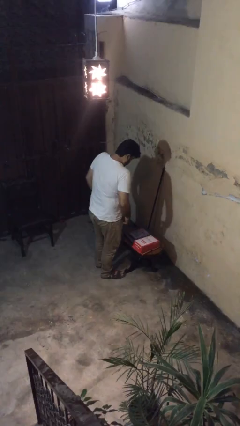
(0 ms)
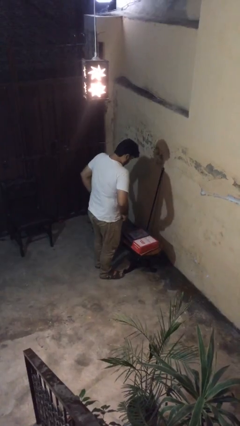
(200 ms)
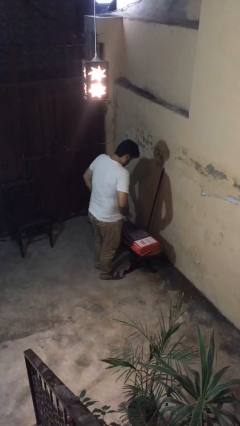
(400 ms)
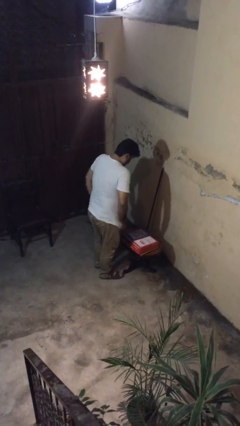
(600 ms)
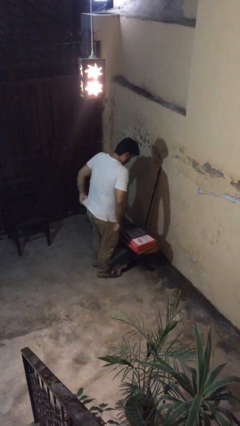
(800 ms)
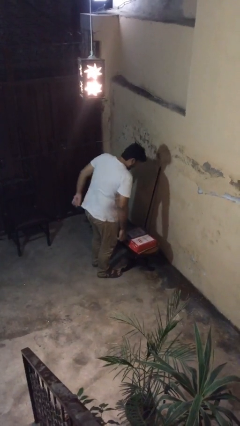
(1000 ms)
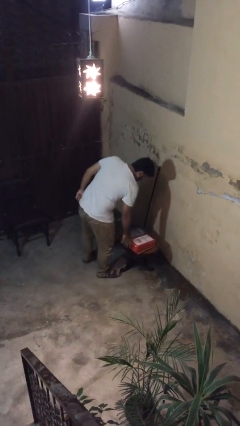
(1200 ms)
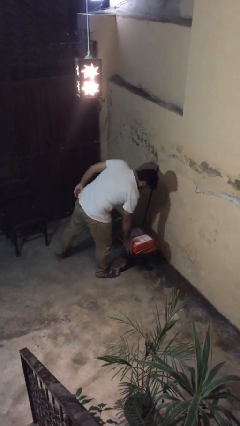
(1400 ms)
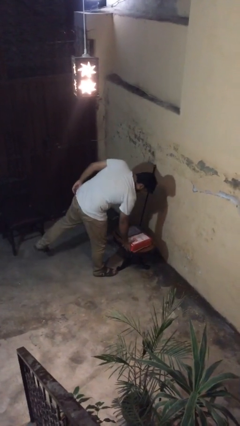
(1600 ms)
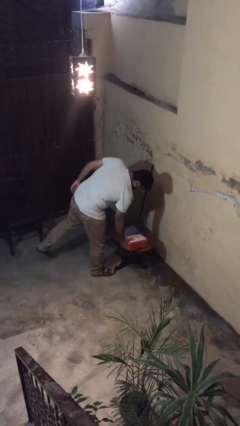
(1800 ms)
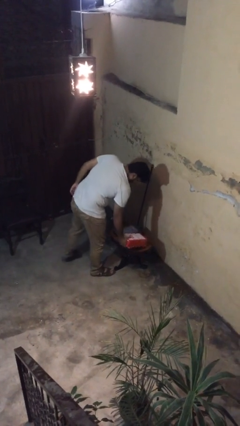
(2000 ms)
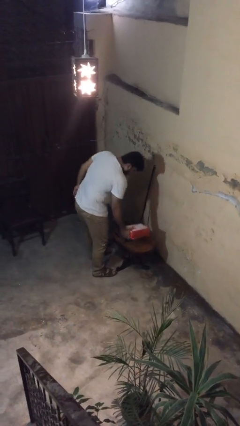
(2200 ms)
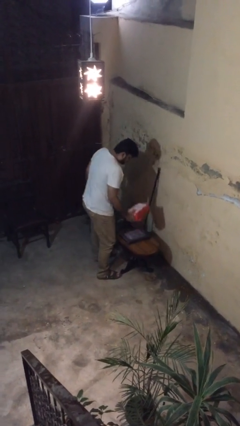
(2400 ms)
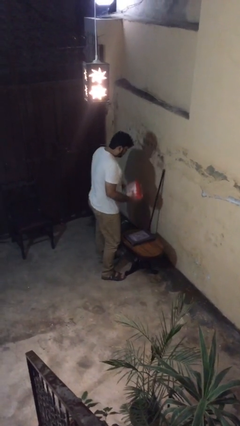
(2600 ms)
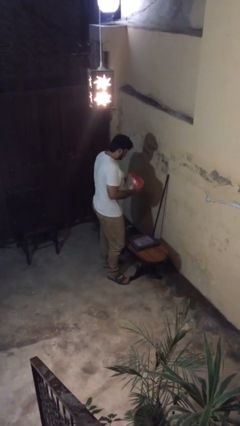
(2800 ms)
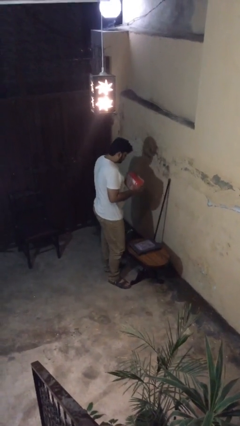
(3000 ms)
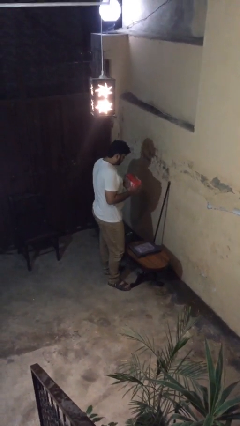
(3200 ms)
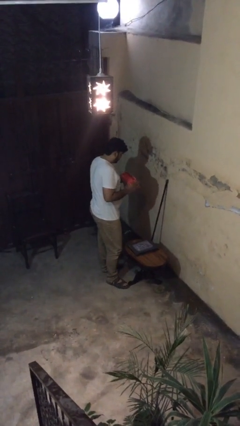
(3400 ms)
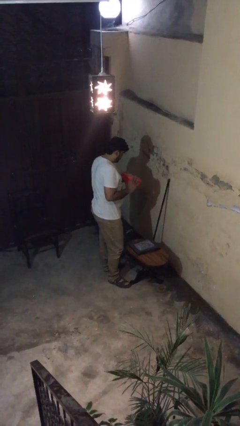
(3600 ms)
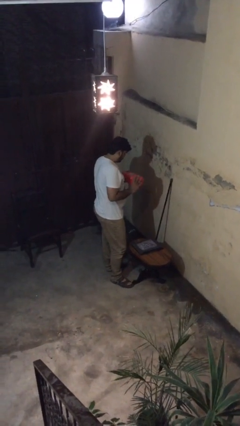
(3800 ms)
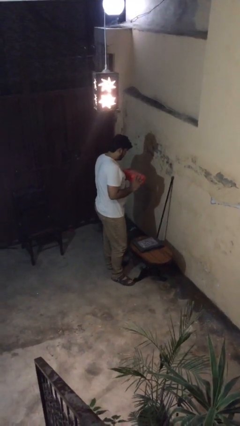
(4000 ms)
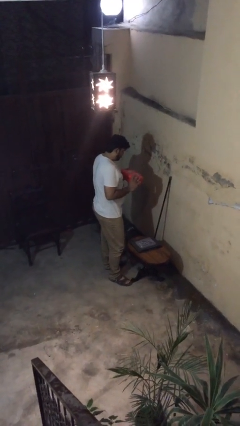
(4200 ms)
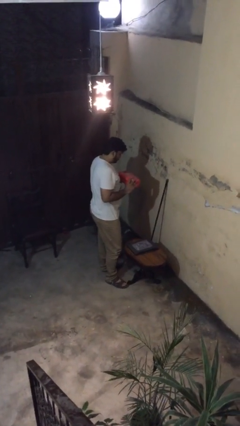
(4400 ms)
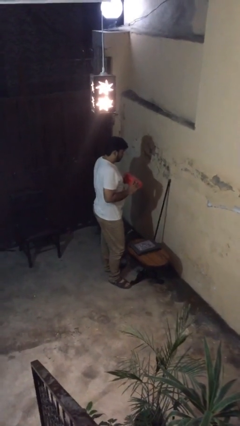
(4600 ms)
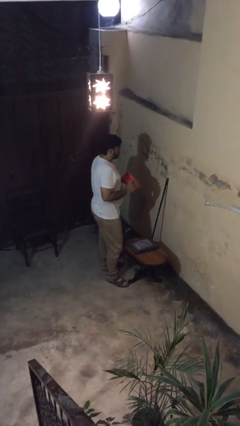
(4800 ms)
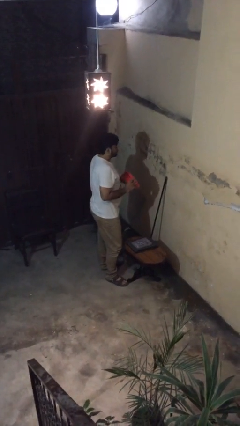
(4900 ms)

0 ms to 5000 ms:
person picks up object from table

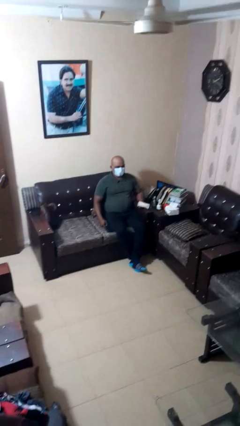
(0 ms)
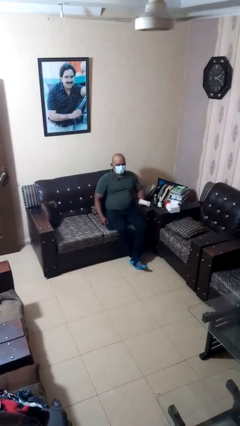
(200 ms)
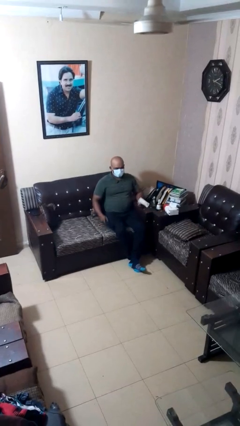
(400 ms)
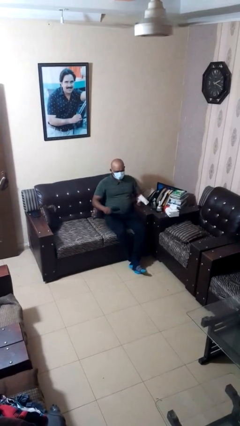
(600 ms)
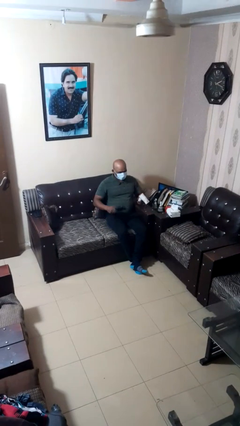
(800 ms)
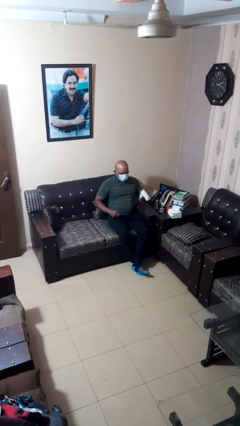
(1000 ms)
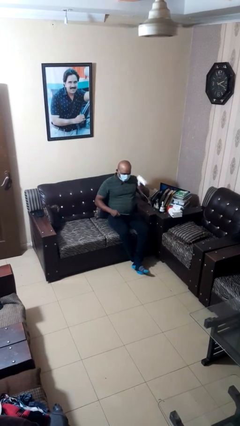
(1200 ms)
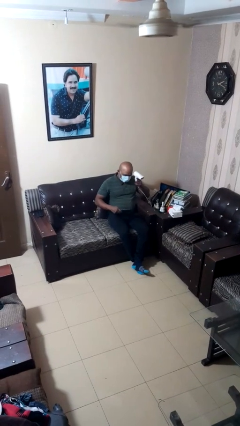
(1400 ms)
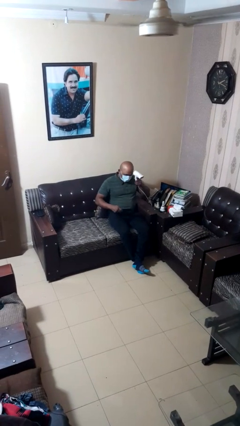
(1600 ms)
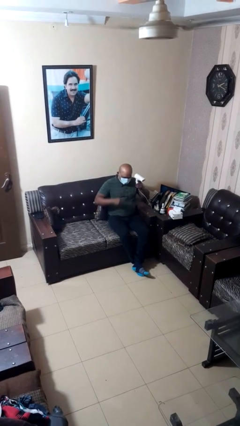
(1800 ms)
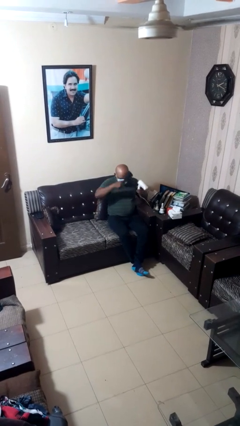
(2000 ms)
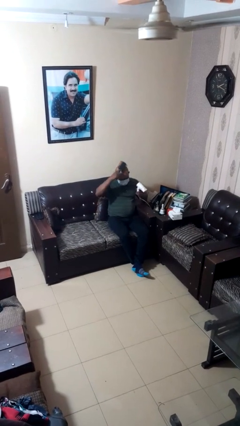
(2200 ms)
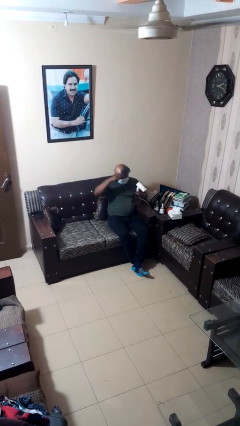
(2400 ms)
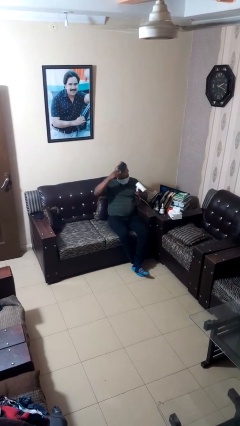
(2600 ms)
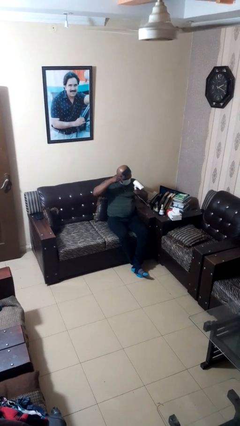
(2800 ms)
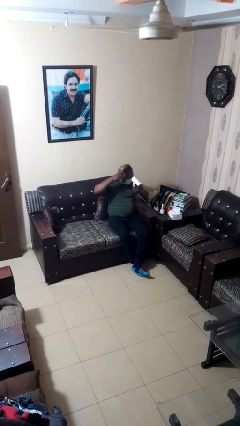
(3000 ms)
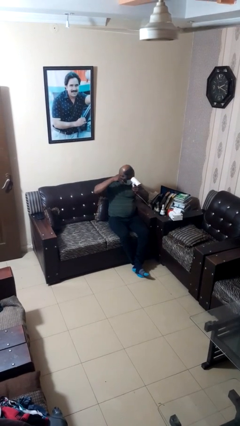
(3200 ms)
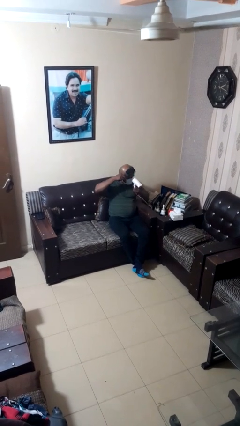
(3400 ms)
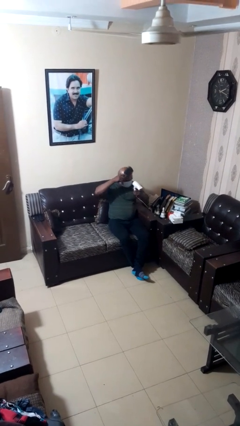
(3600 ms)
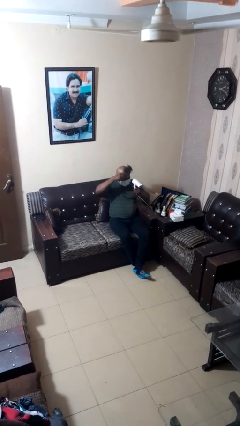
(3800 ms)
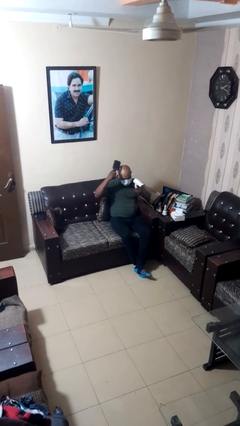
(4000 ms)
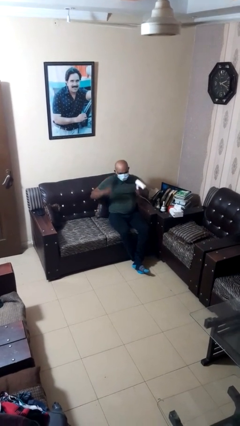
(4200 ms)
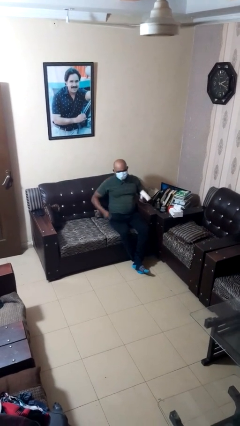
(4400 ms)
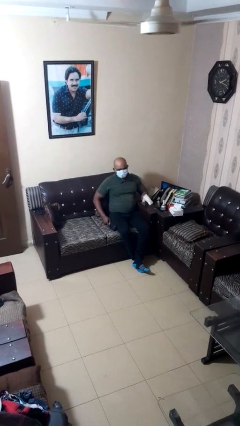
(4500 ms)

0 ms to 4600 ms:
person dries hair with hairdryer

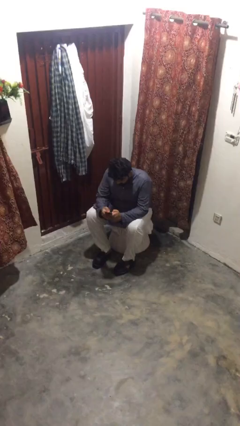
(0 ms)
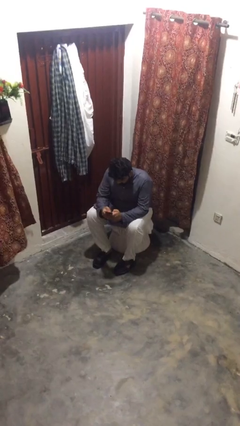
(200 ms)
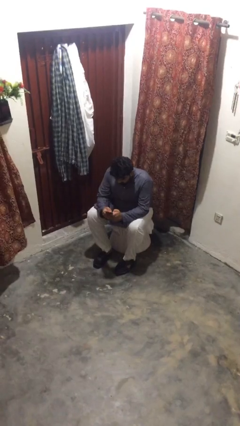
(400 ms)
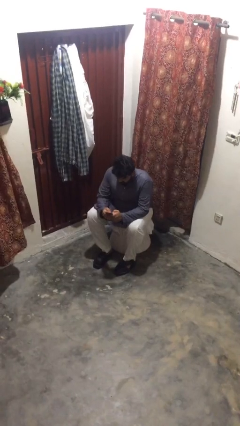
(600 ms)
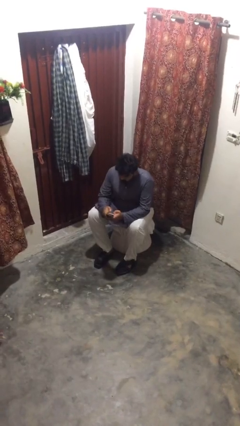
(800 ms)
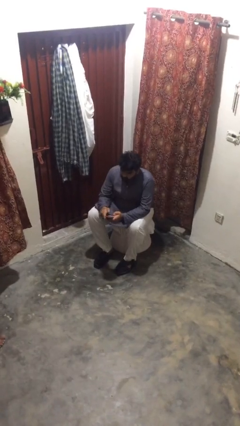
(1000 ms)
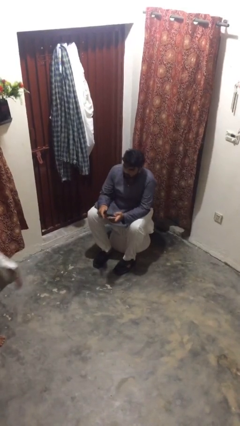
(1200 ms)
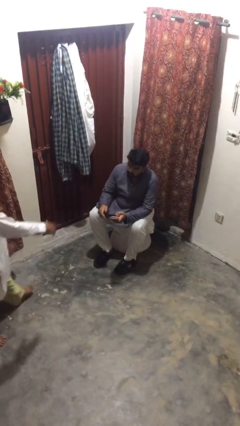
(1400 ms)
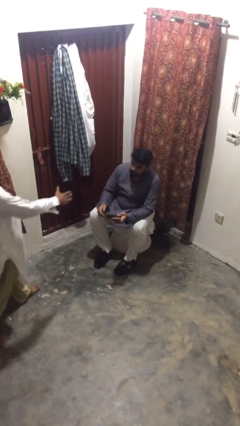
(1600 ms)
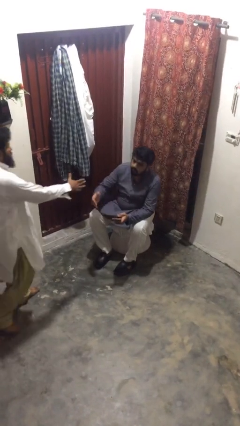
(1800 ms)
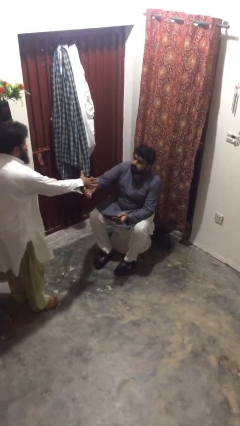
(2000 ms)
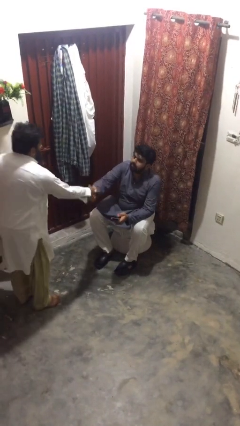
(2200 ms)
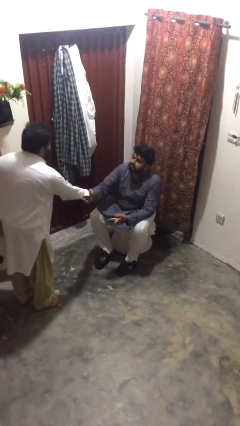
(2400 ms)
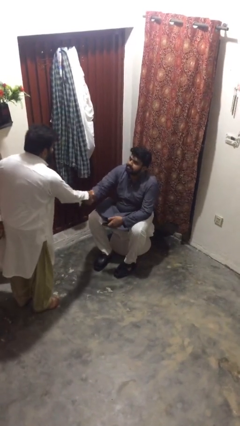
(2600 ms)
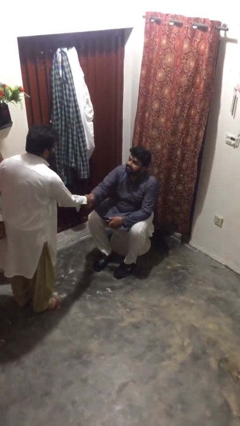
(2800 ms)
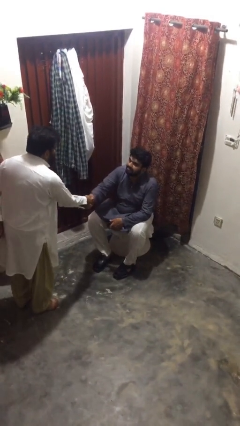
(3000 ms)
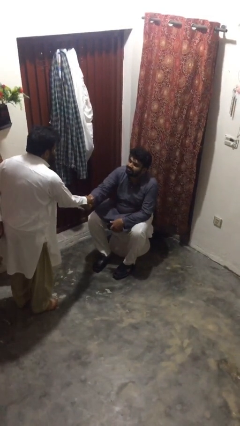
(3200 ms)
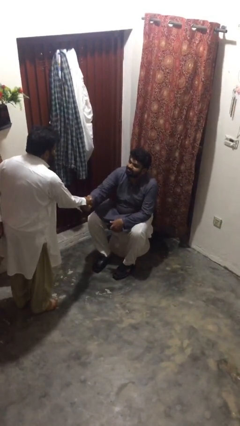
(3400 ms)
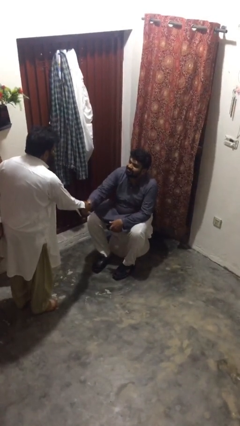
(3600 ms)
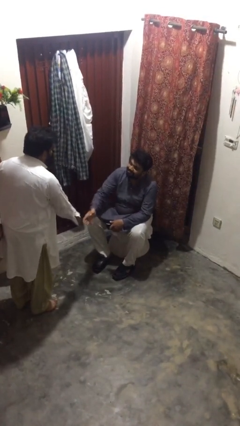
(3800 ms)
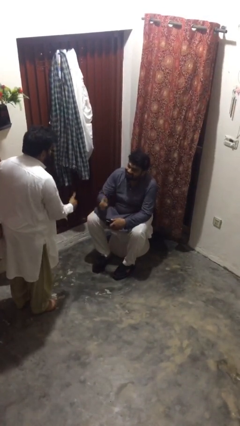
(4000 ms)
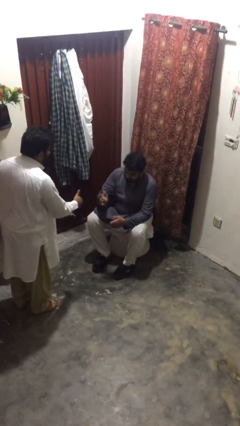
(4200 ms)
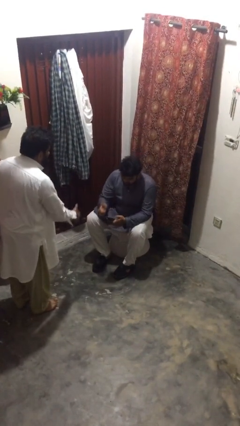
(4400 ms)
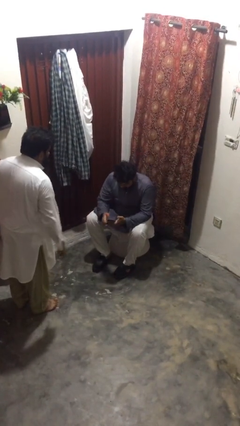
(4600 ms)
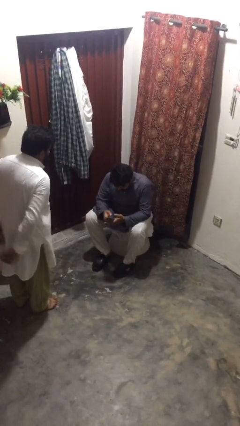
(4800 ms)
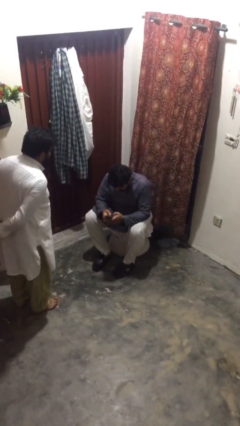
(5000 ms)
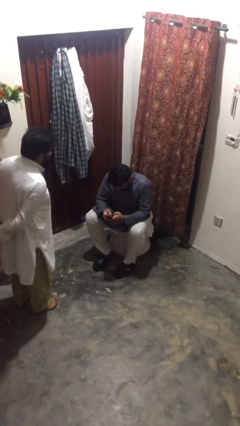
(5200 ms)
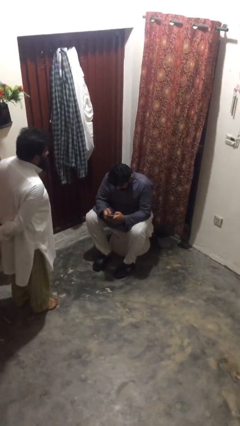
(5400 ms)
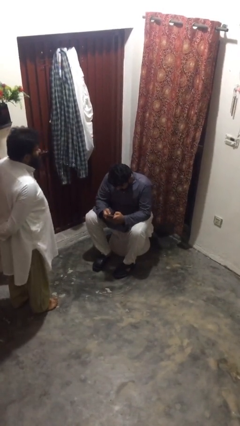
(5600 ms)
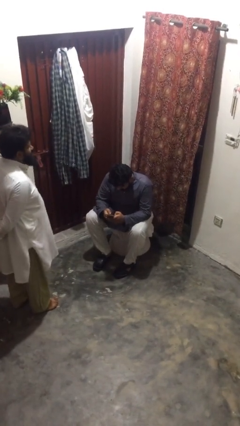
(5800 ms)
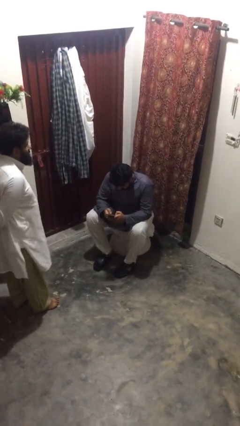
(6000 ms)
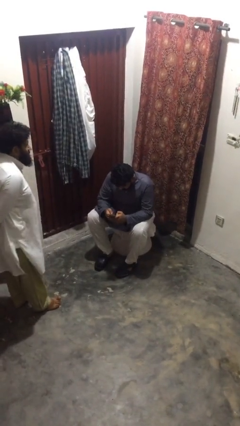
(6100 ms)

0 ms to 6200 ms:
person shakes hand

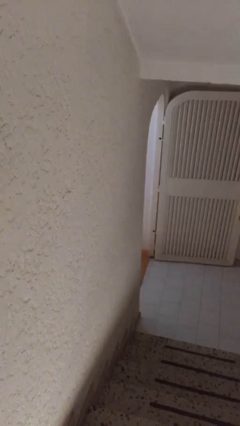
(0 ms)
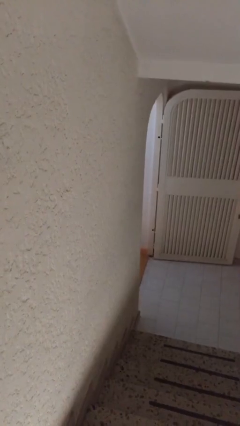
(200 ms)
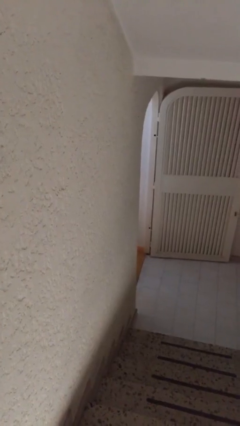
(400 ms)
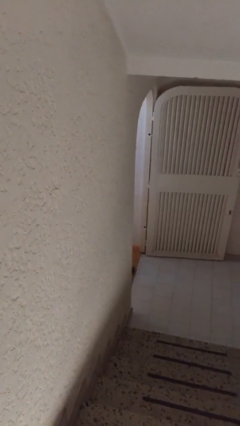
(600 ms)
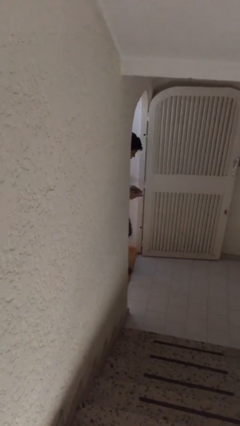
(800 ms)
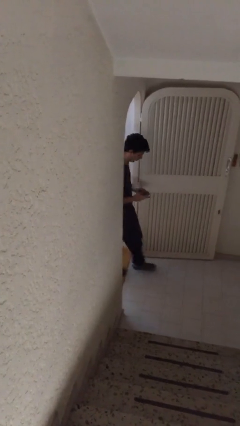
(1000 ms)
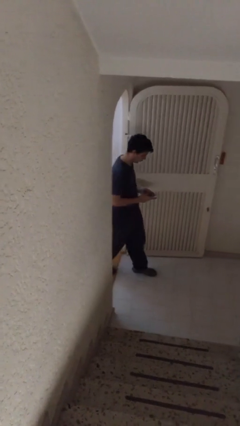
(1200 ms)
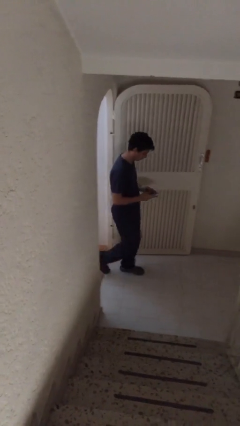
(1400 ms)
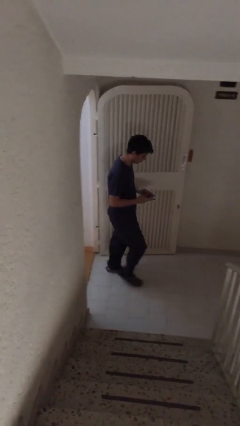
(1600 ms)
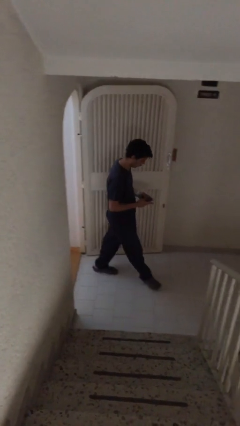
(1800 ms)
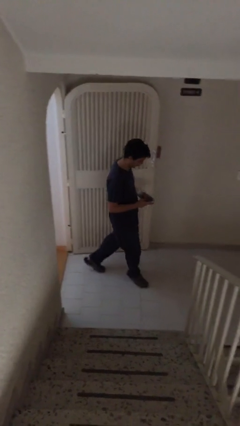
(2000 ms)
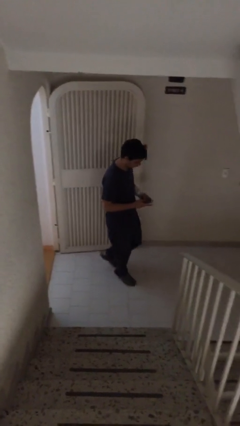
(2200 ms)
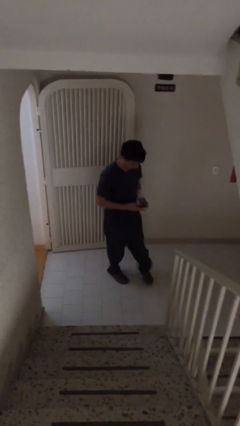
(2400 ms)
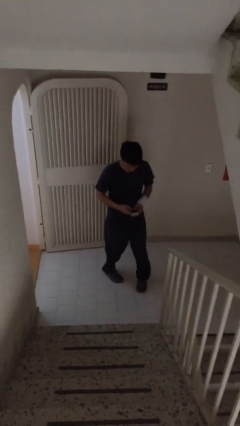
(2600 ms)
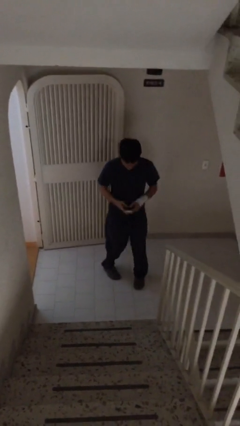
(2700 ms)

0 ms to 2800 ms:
person enters scene through structure
